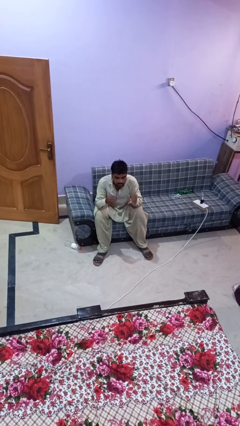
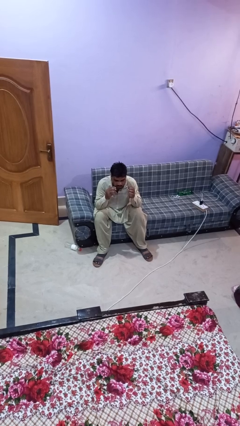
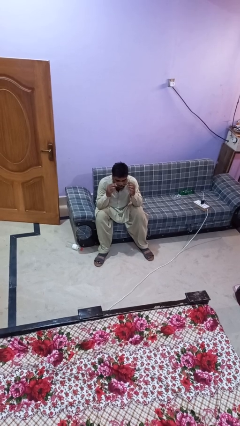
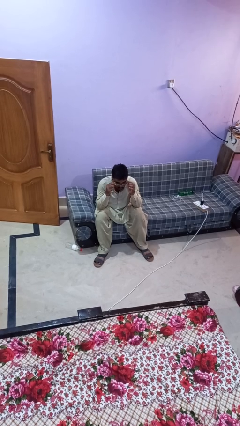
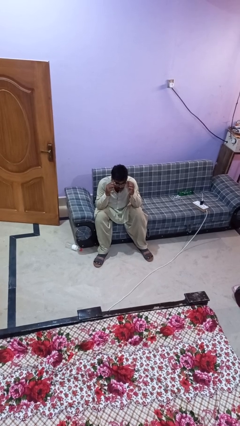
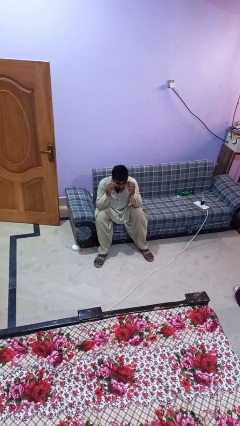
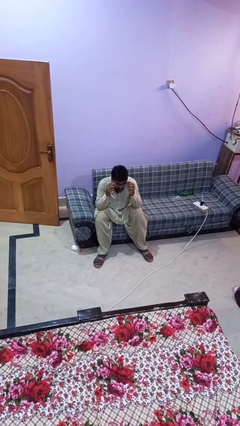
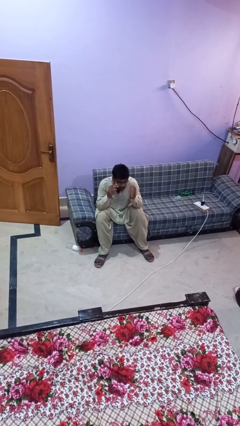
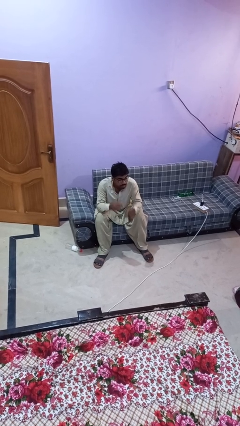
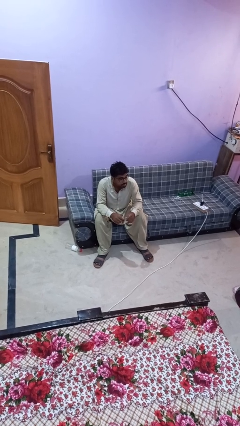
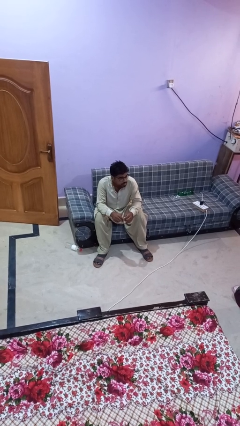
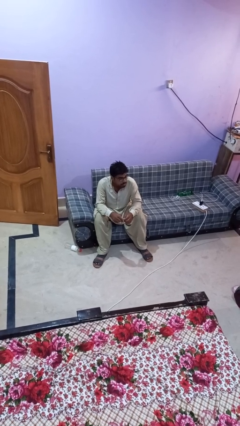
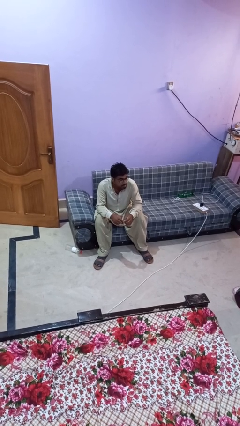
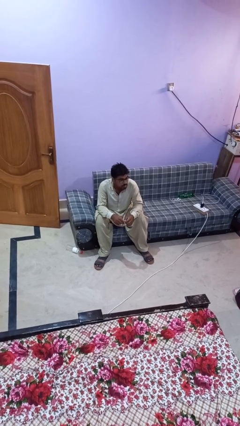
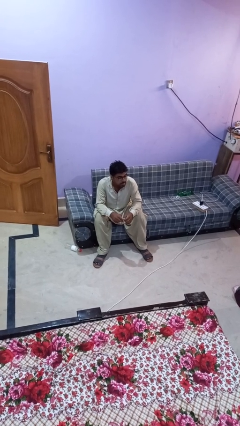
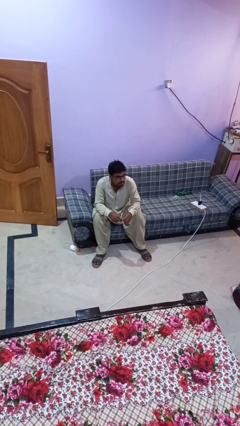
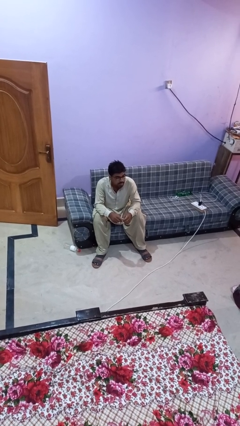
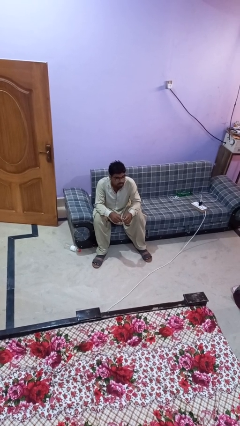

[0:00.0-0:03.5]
person puts on glasses

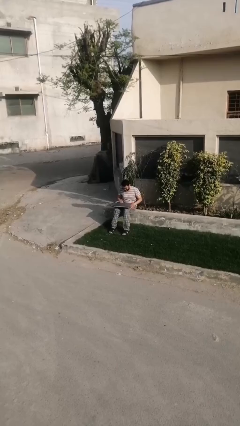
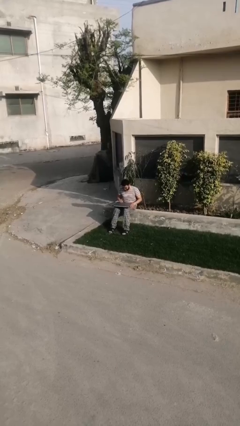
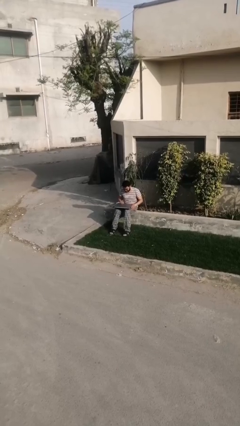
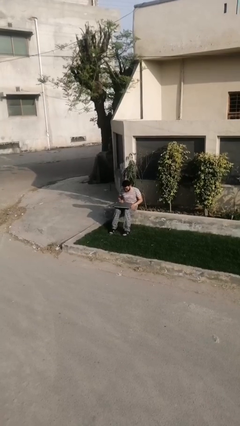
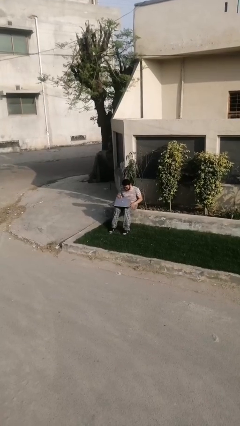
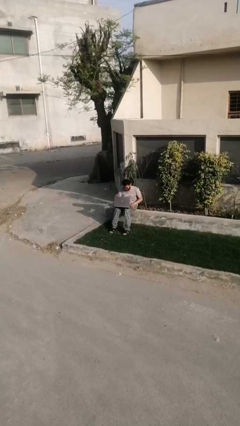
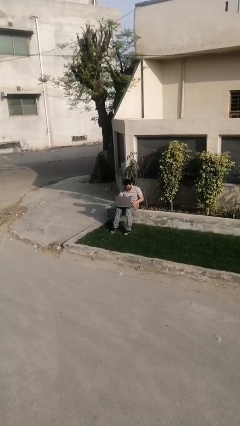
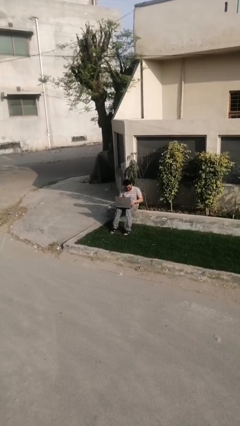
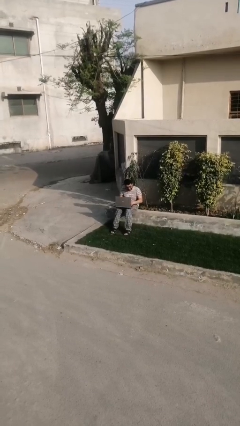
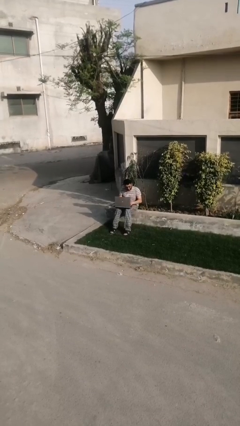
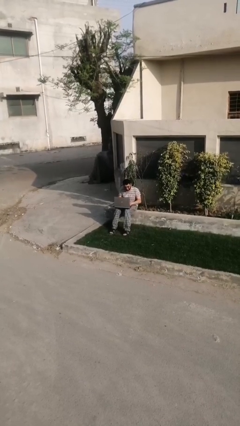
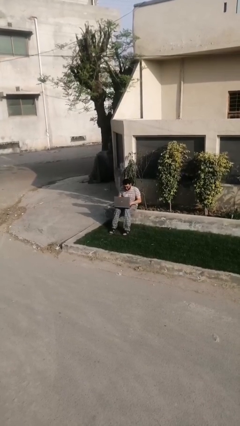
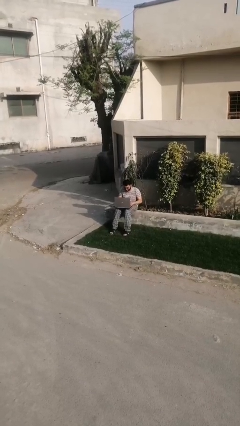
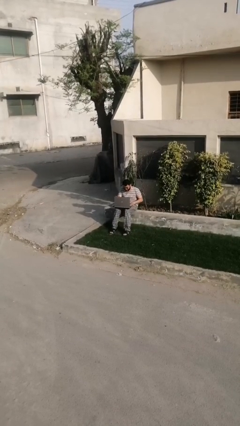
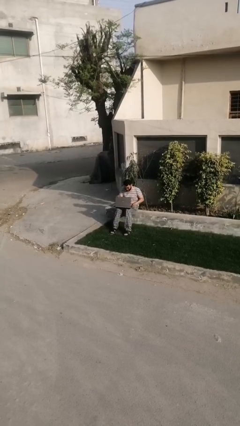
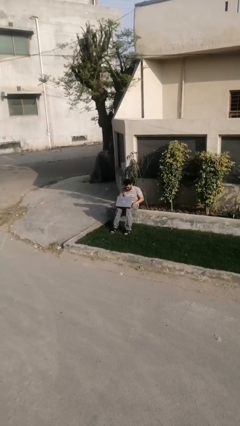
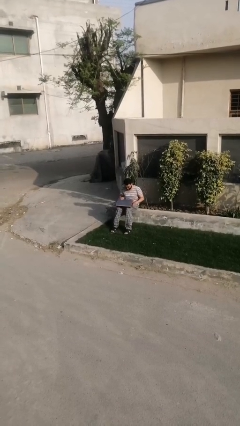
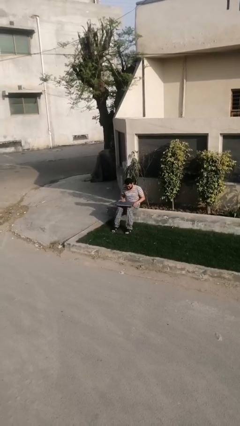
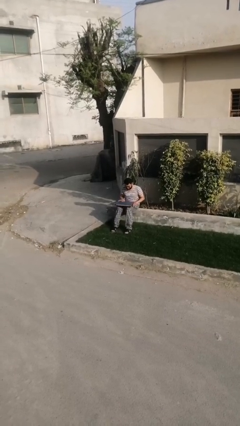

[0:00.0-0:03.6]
person interacts with laptop

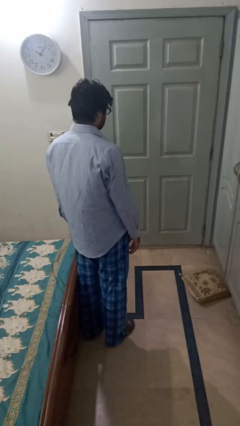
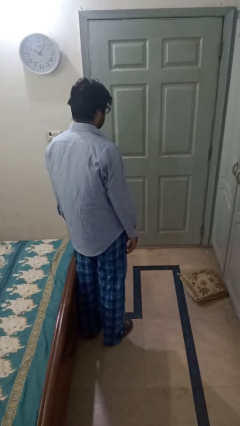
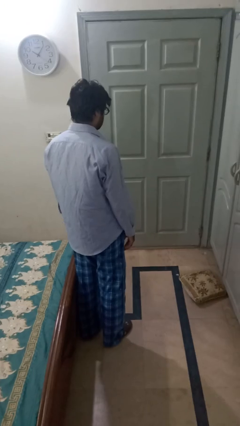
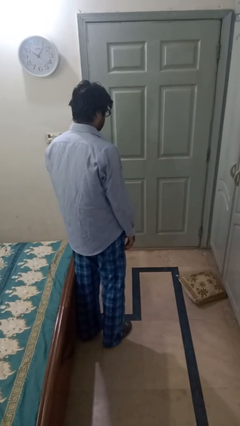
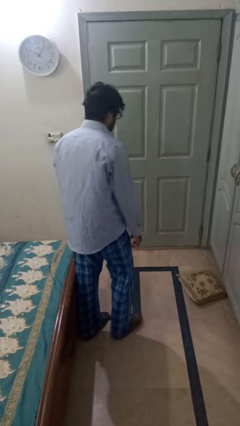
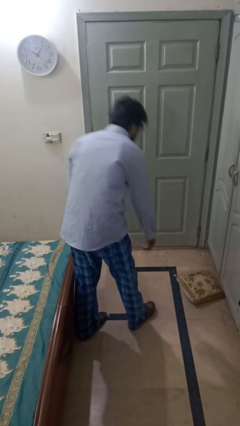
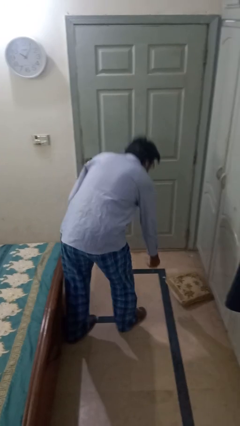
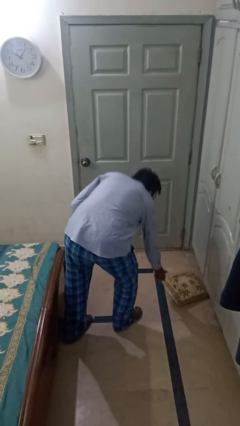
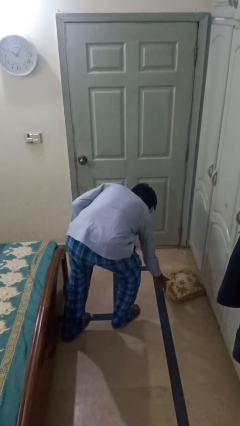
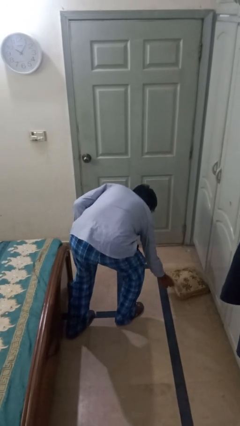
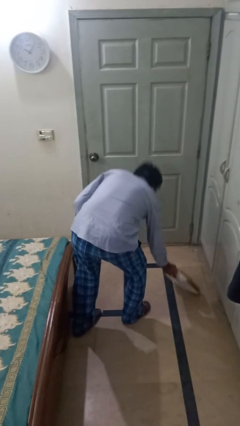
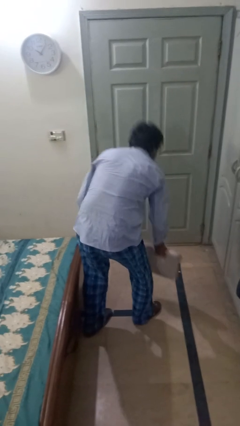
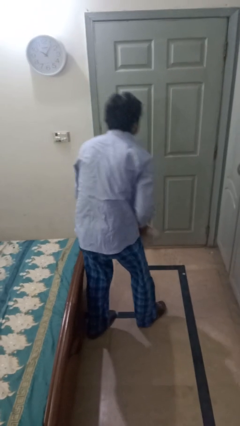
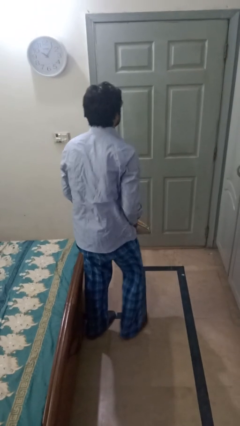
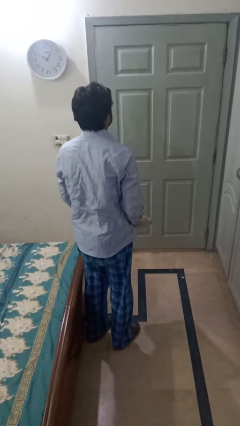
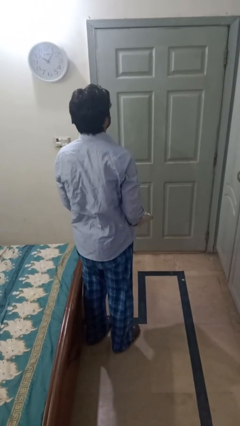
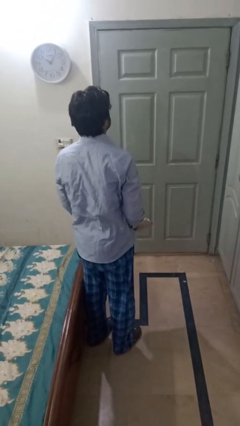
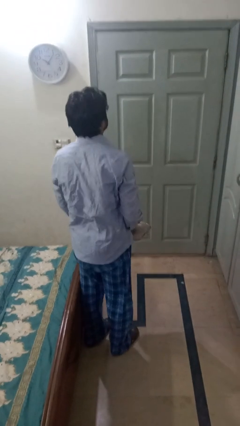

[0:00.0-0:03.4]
person picks up object from floor

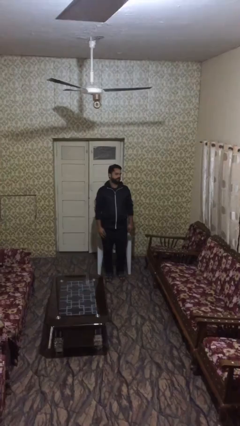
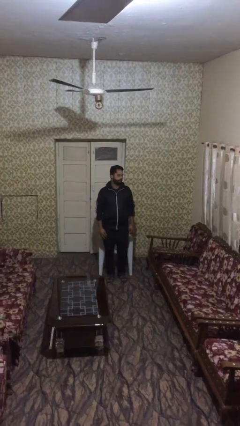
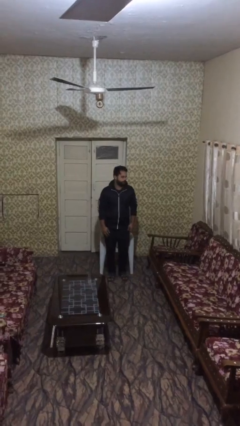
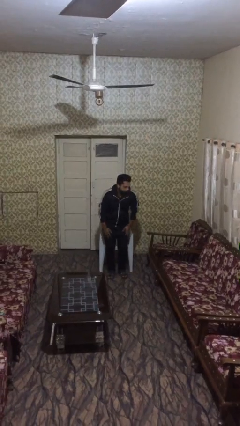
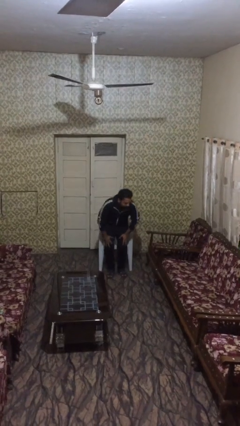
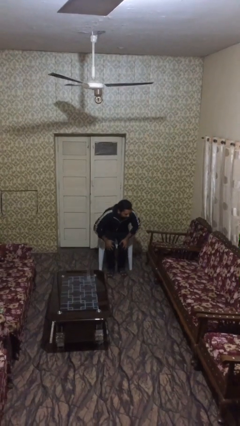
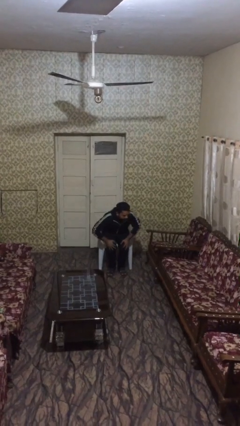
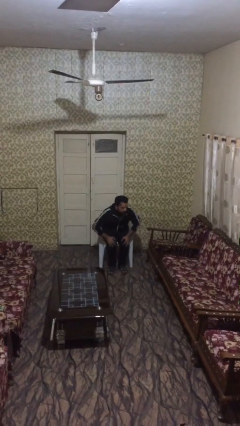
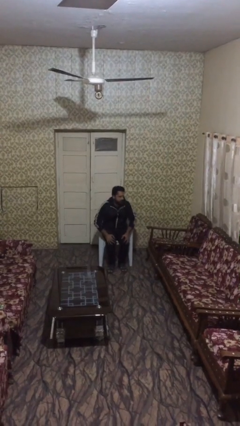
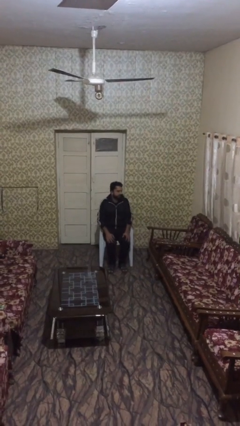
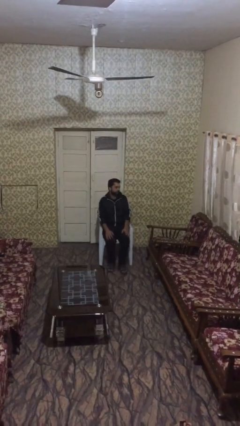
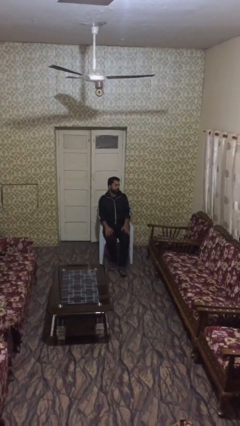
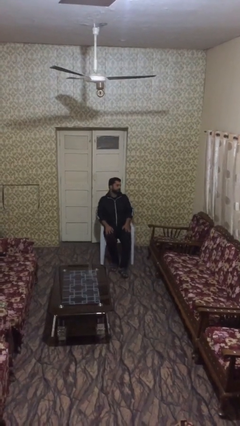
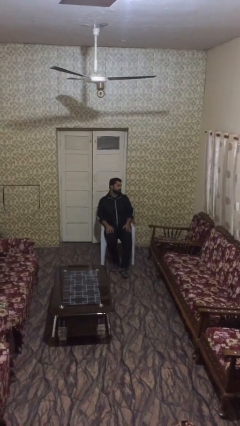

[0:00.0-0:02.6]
person sits down

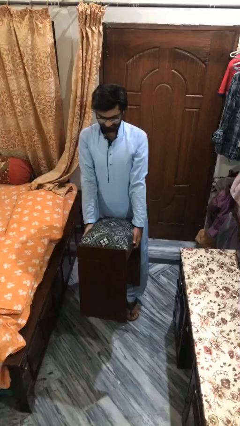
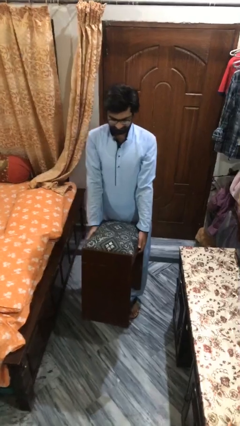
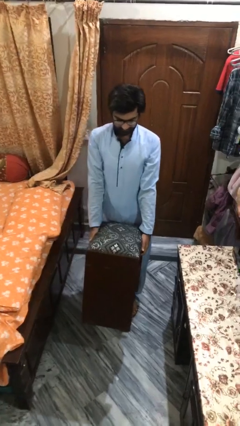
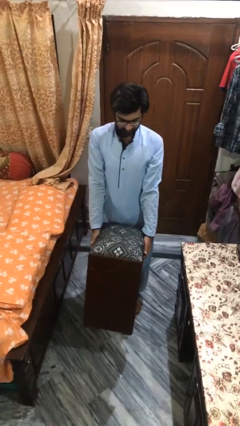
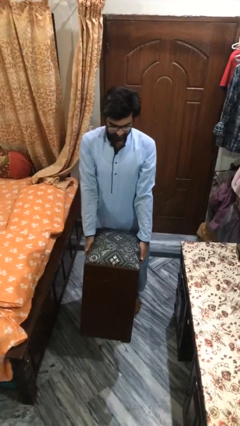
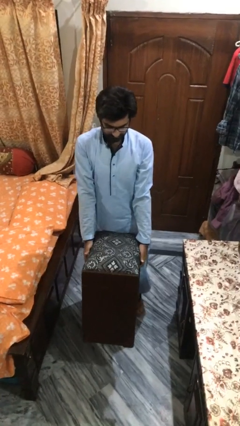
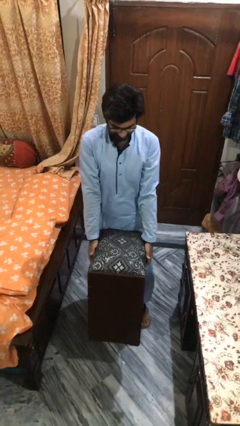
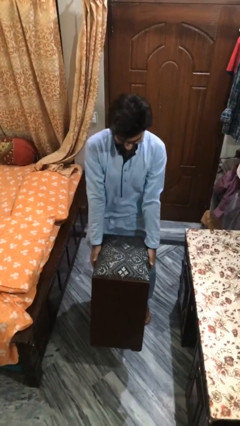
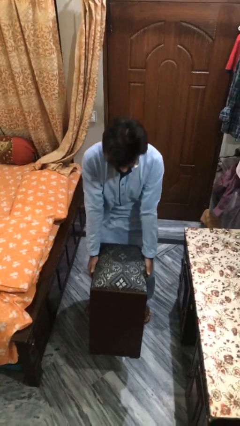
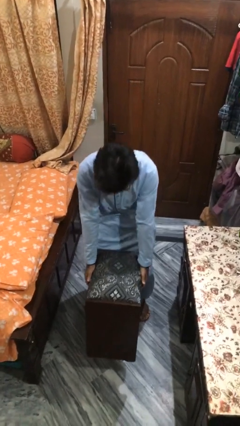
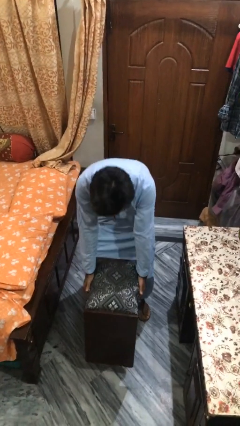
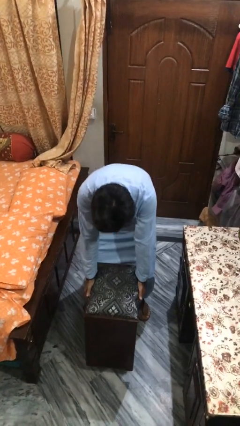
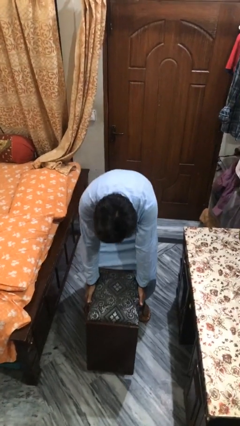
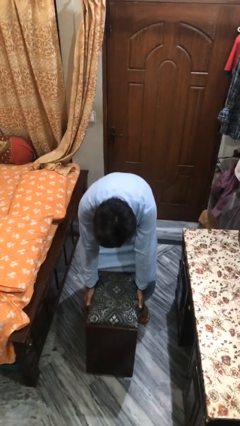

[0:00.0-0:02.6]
person puts down object on floor

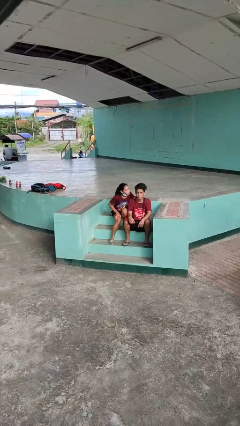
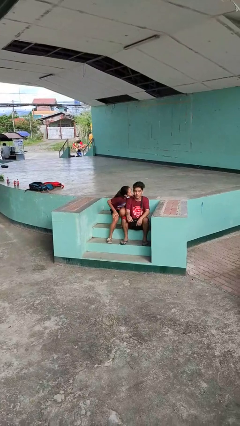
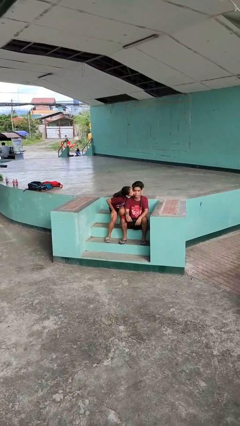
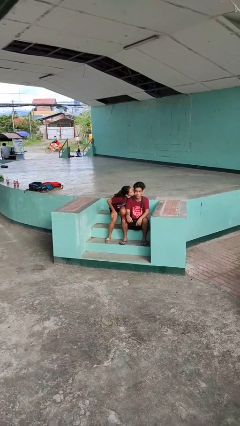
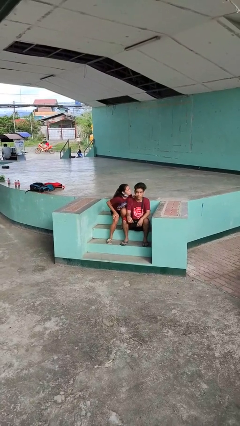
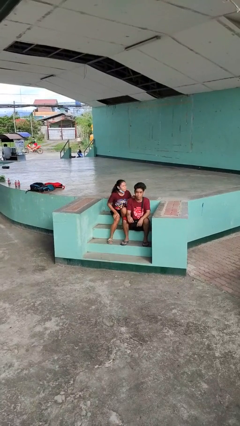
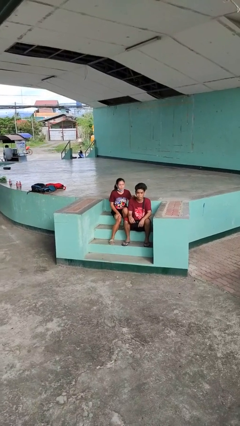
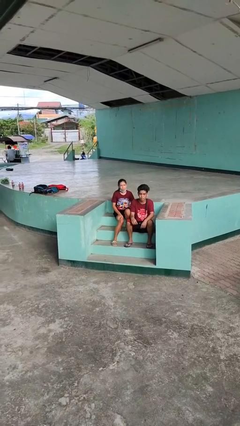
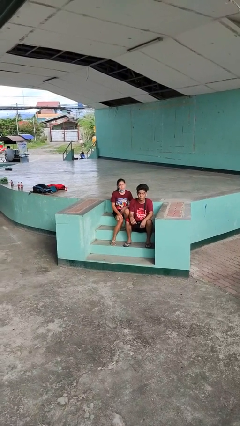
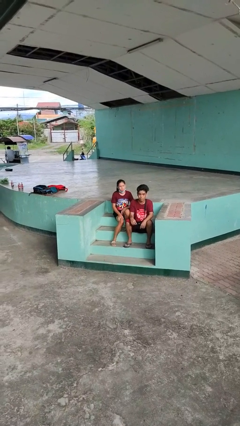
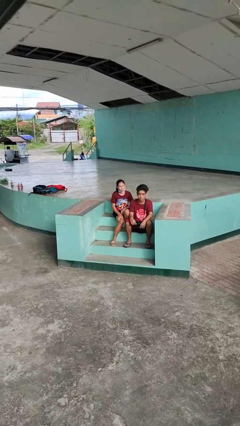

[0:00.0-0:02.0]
person kisses cheek of person
